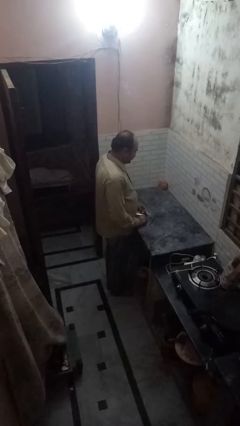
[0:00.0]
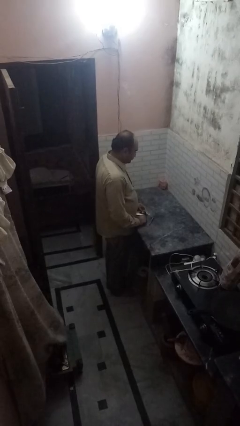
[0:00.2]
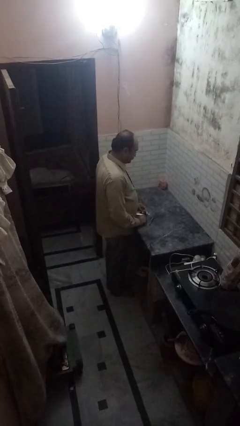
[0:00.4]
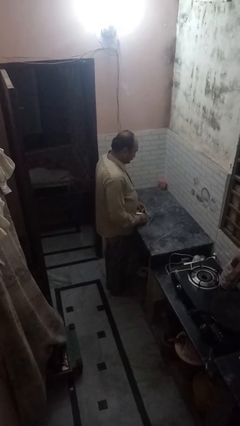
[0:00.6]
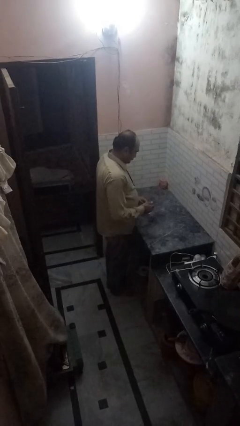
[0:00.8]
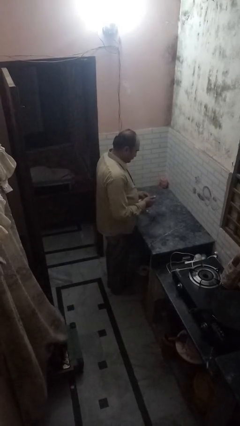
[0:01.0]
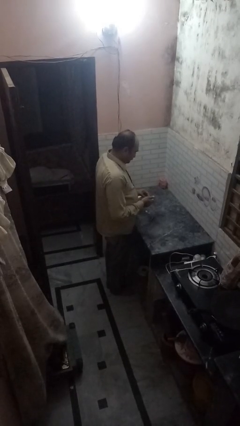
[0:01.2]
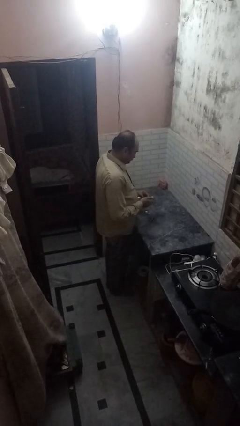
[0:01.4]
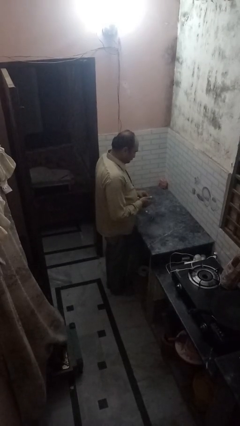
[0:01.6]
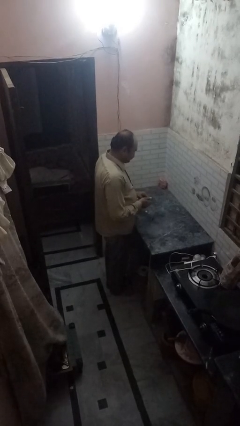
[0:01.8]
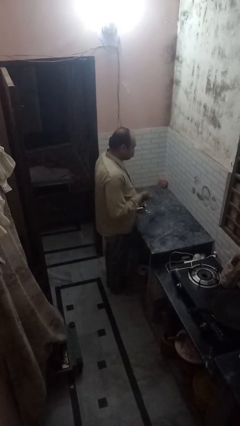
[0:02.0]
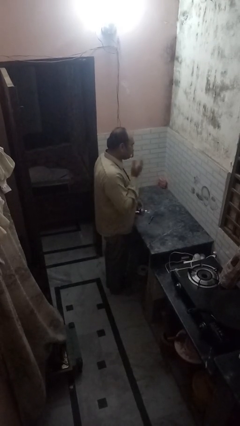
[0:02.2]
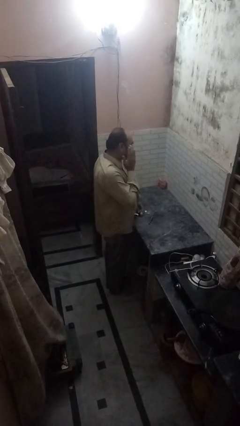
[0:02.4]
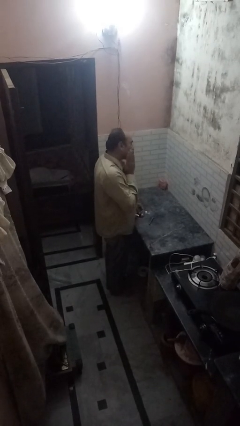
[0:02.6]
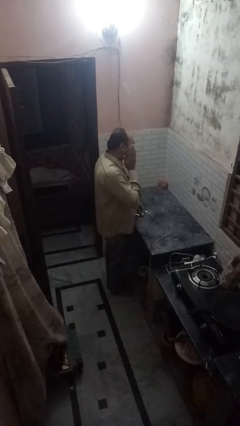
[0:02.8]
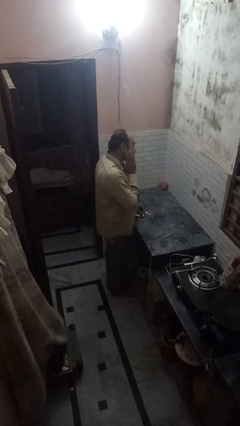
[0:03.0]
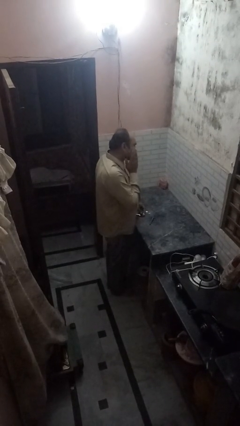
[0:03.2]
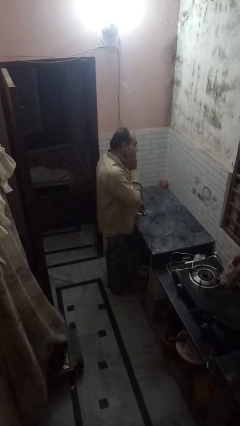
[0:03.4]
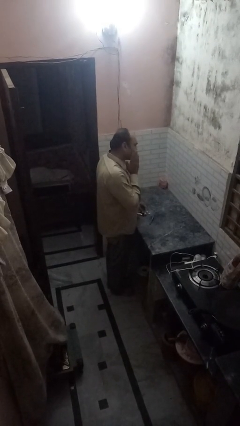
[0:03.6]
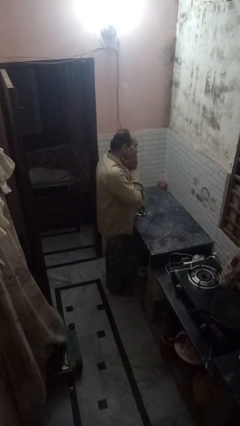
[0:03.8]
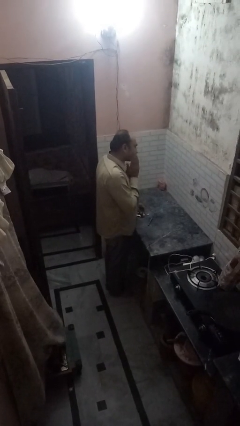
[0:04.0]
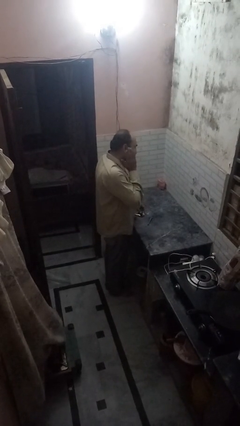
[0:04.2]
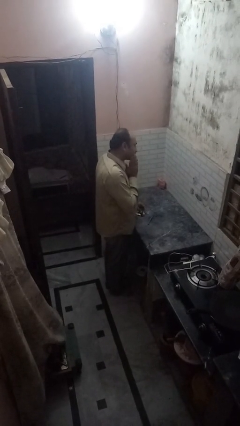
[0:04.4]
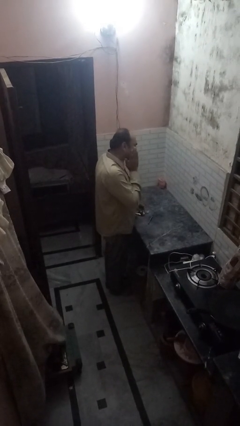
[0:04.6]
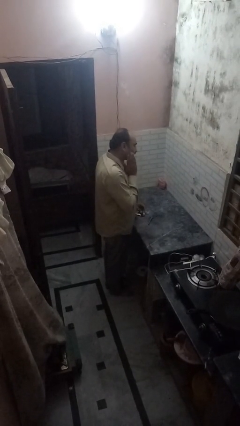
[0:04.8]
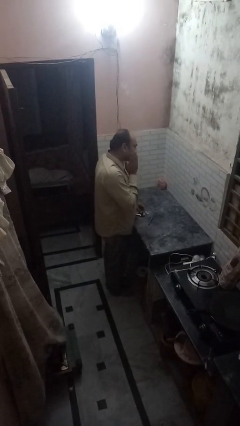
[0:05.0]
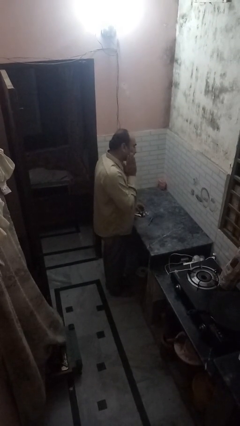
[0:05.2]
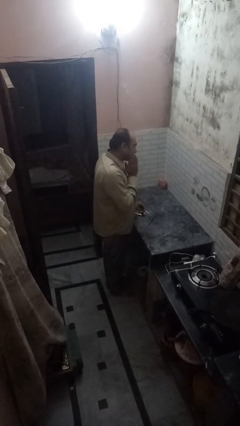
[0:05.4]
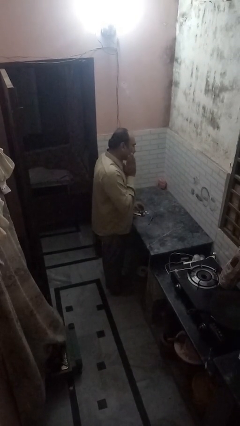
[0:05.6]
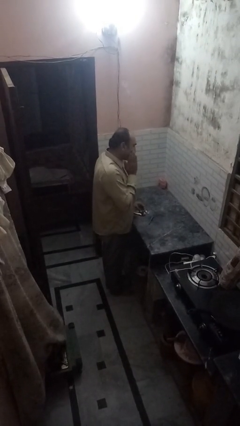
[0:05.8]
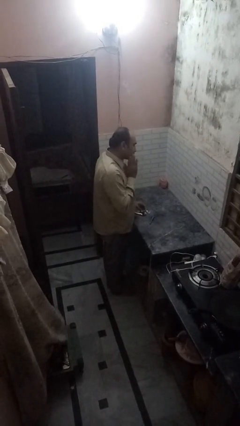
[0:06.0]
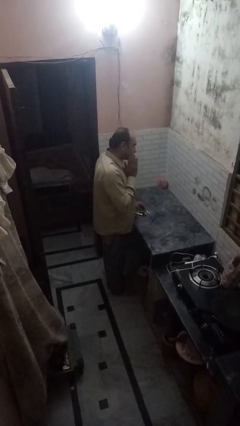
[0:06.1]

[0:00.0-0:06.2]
person applies shaving cream

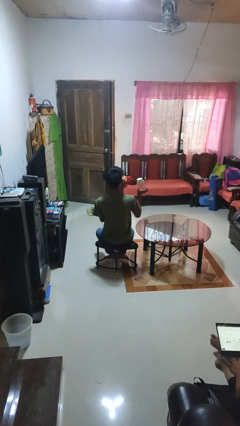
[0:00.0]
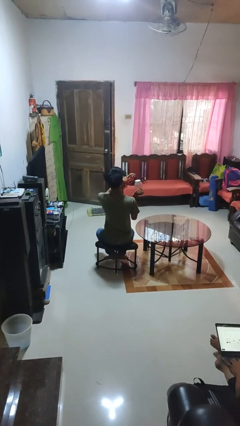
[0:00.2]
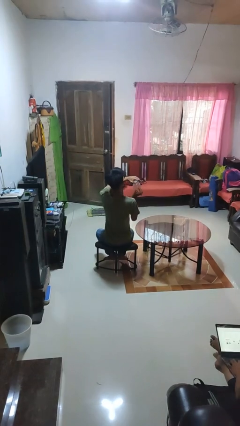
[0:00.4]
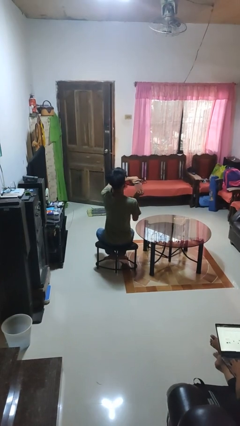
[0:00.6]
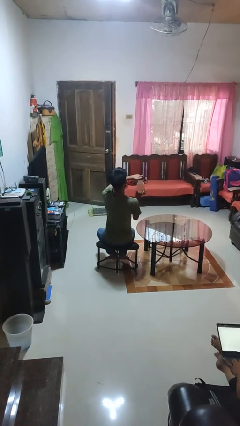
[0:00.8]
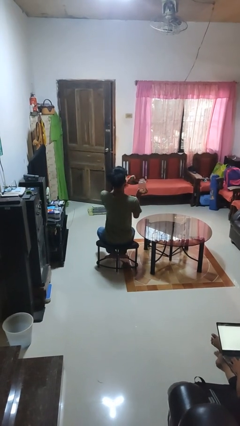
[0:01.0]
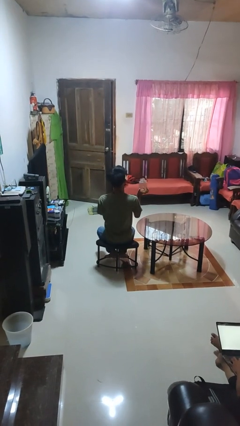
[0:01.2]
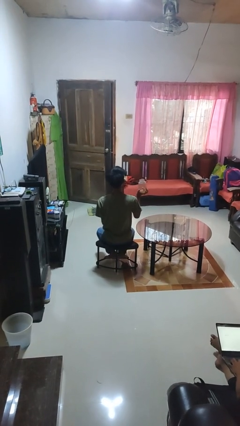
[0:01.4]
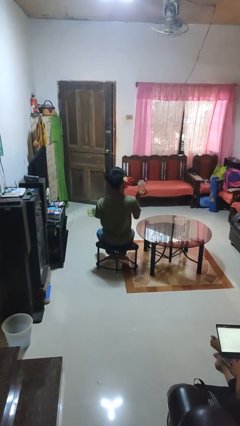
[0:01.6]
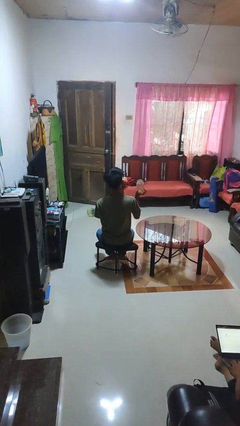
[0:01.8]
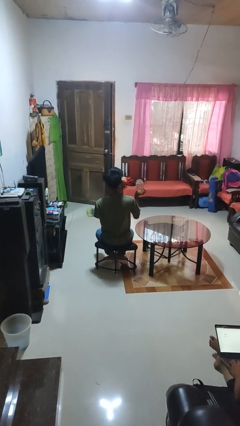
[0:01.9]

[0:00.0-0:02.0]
person opens jar

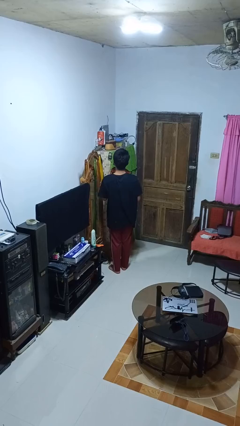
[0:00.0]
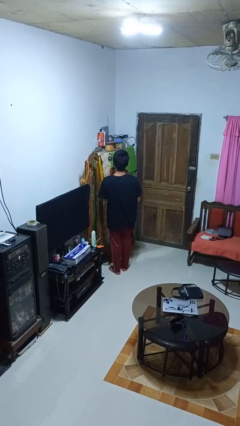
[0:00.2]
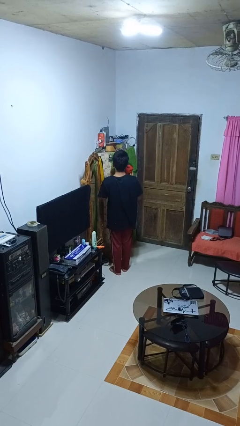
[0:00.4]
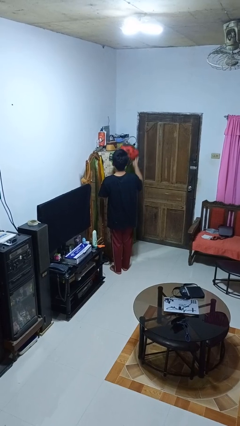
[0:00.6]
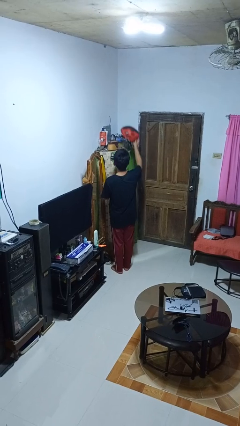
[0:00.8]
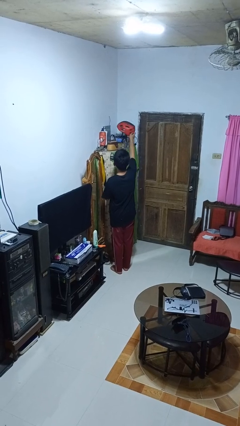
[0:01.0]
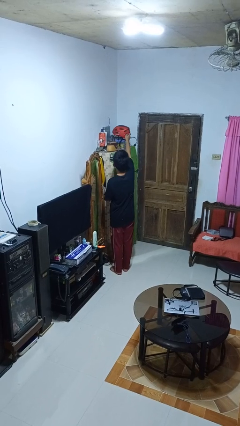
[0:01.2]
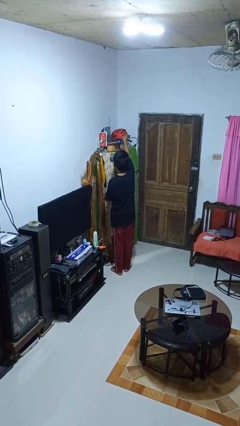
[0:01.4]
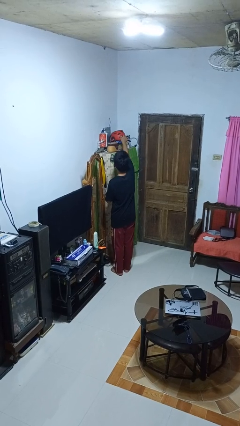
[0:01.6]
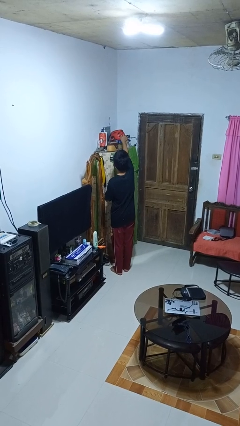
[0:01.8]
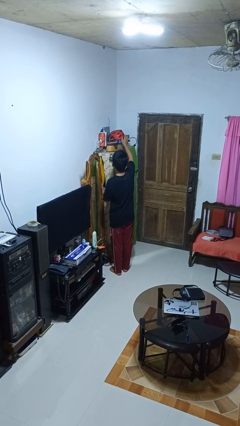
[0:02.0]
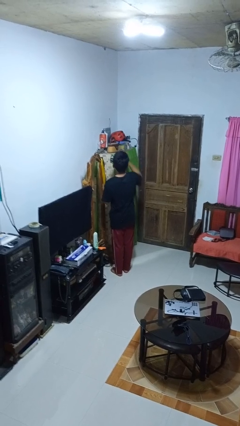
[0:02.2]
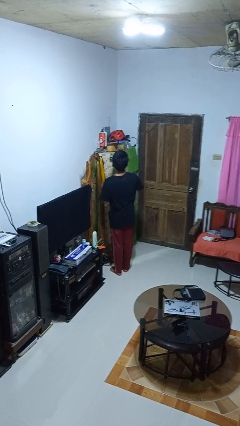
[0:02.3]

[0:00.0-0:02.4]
person puts down object on shelf

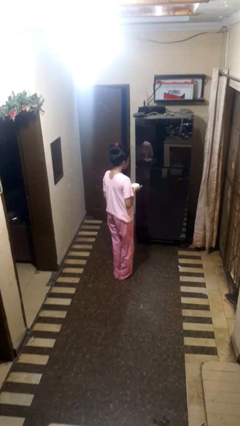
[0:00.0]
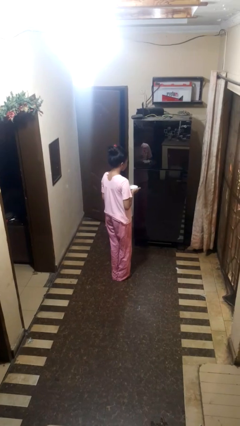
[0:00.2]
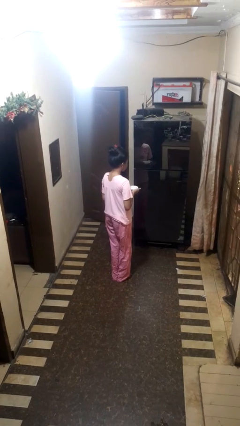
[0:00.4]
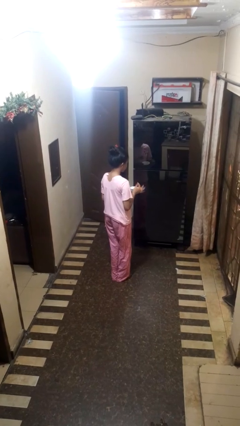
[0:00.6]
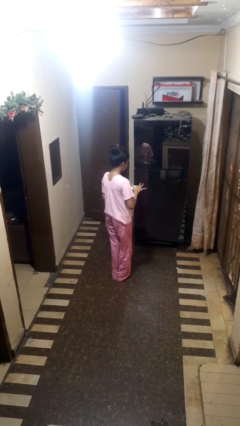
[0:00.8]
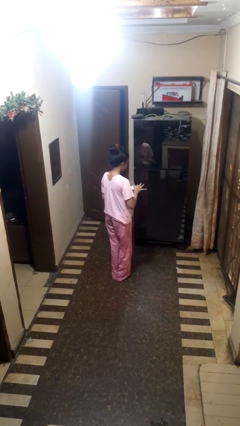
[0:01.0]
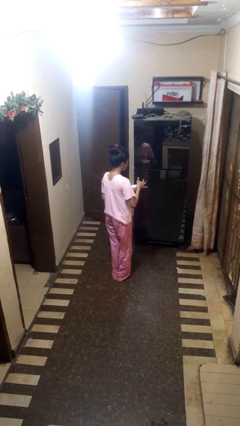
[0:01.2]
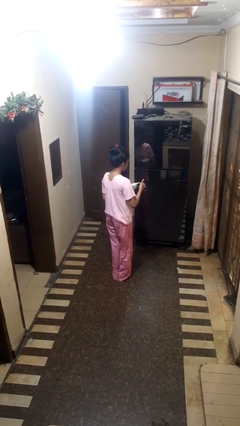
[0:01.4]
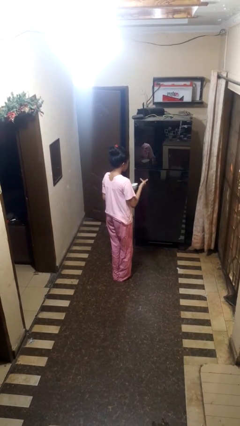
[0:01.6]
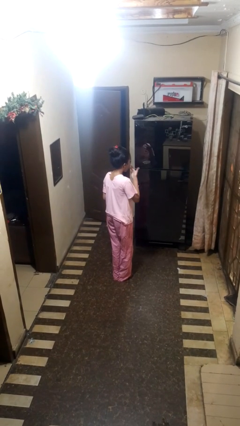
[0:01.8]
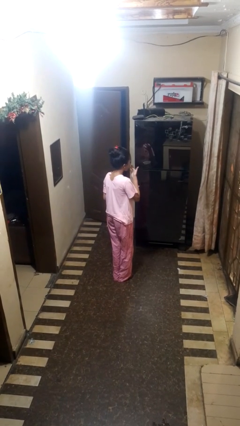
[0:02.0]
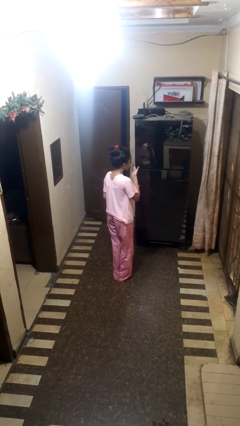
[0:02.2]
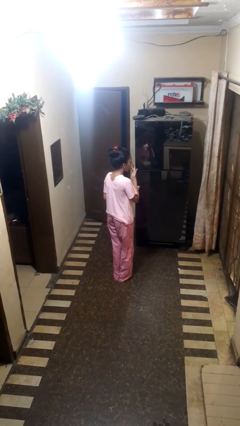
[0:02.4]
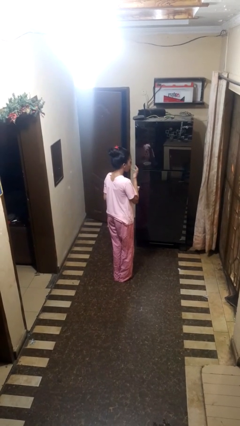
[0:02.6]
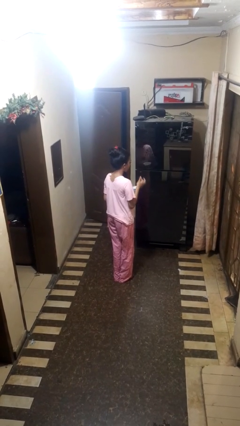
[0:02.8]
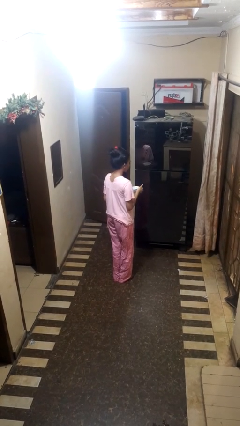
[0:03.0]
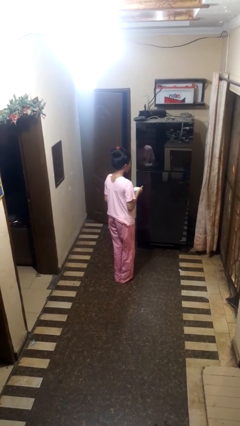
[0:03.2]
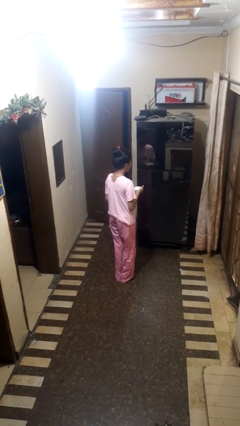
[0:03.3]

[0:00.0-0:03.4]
person licks fingers

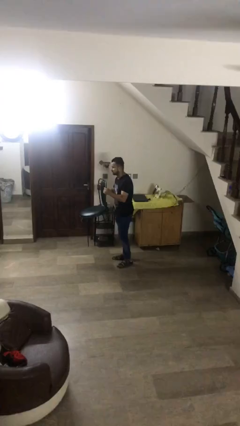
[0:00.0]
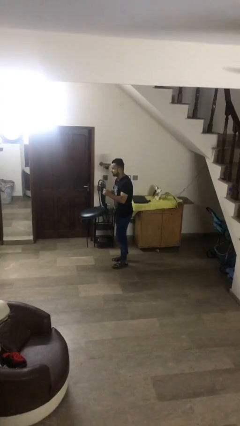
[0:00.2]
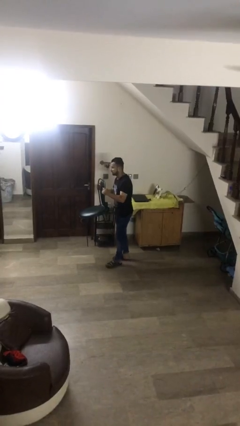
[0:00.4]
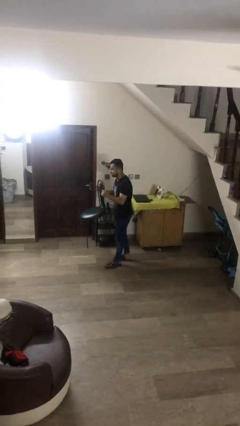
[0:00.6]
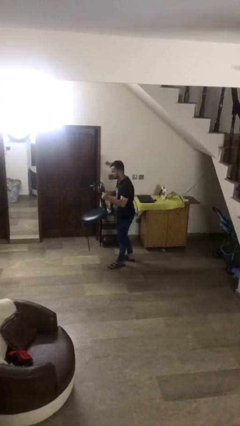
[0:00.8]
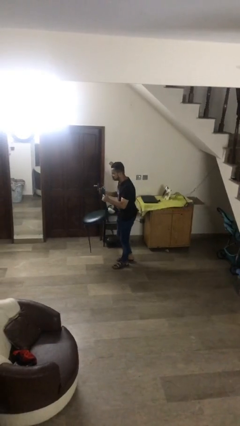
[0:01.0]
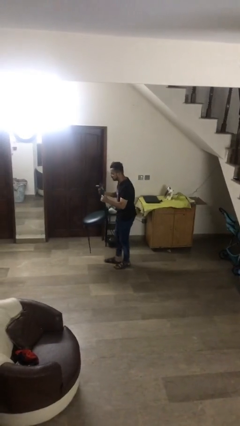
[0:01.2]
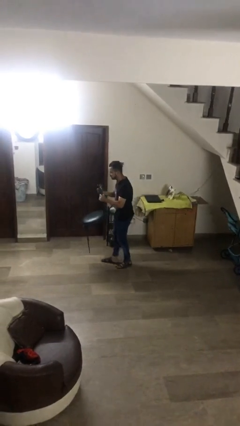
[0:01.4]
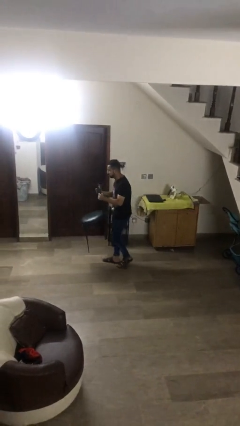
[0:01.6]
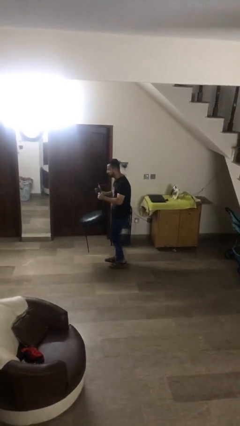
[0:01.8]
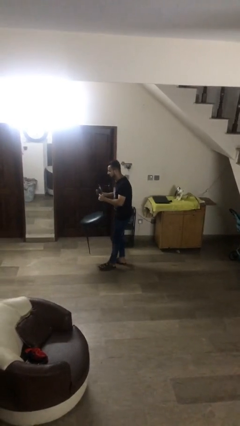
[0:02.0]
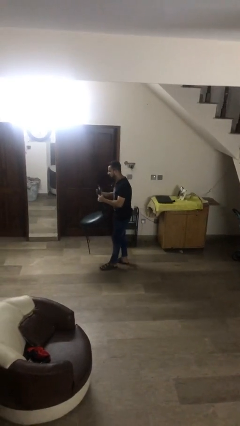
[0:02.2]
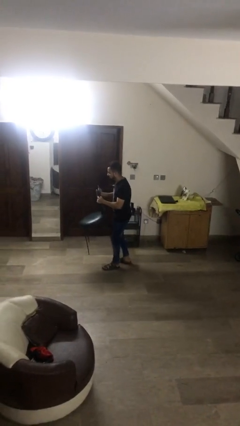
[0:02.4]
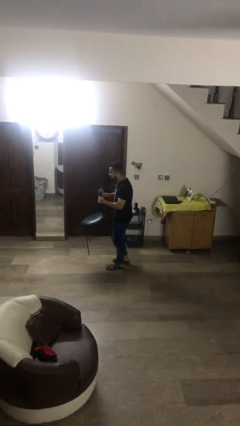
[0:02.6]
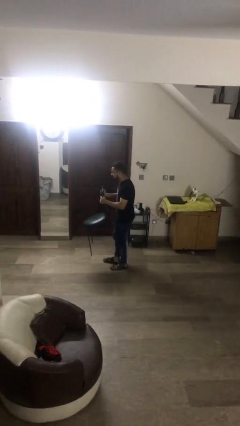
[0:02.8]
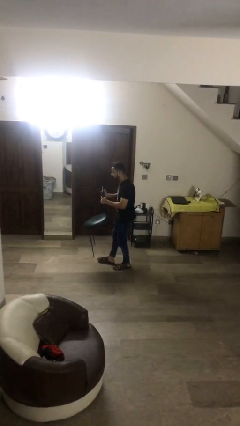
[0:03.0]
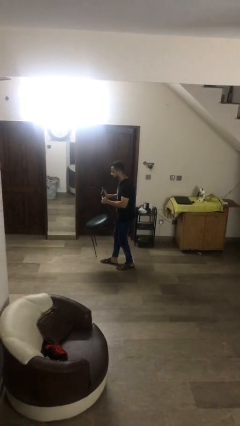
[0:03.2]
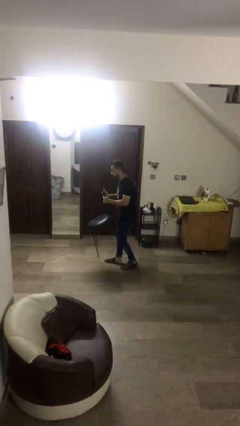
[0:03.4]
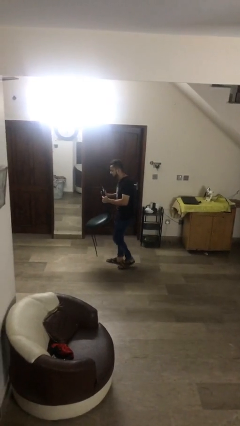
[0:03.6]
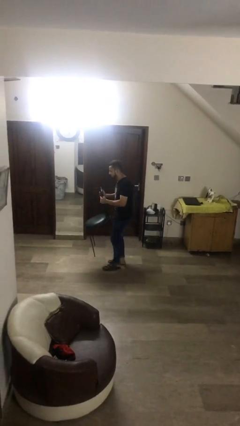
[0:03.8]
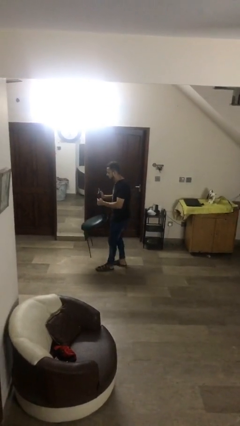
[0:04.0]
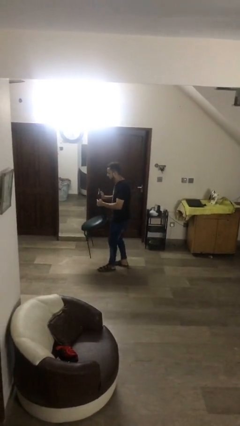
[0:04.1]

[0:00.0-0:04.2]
person carries heavy object
